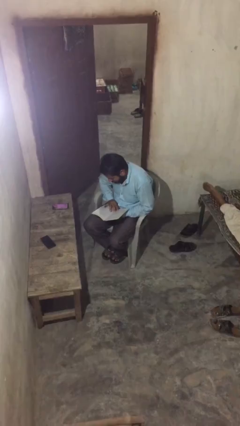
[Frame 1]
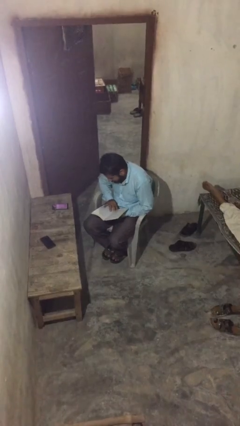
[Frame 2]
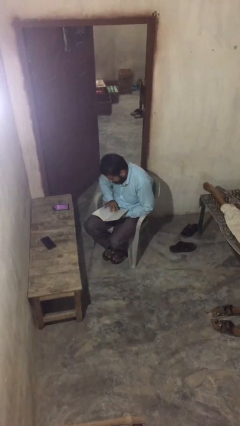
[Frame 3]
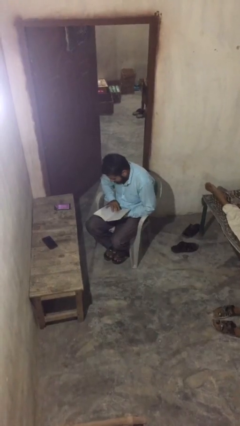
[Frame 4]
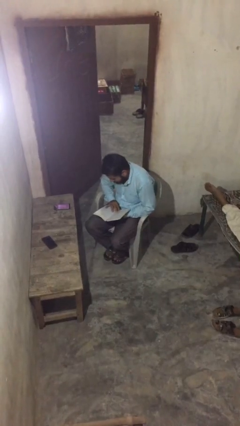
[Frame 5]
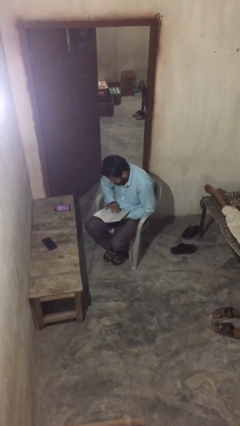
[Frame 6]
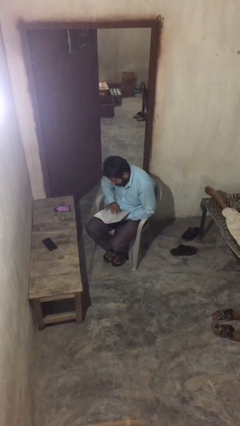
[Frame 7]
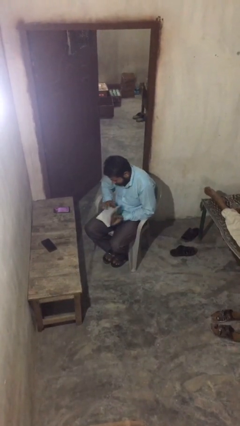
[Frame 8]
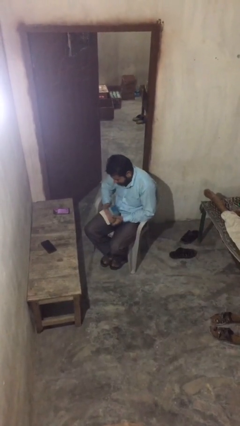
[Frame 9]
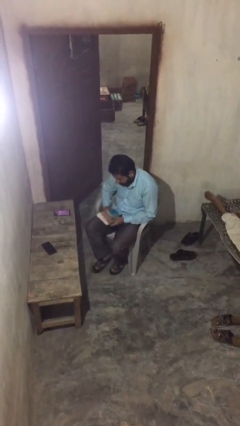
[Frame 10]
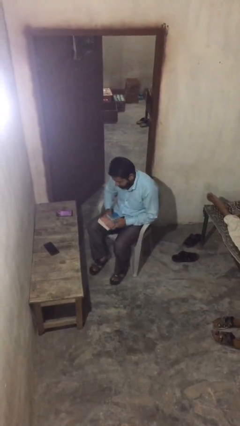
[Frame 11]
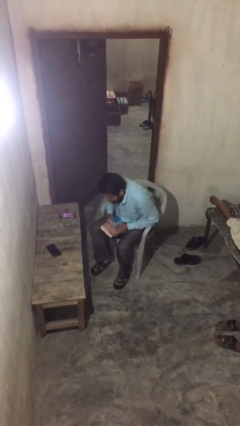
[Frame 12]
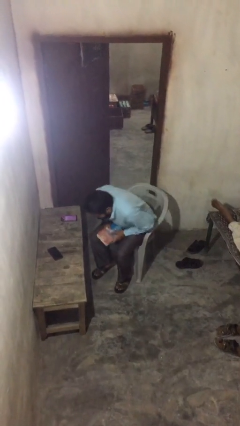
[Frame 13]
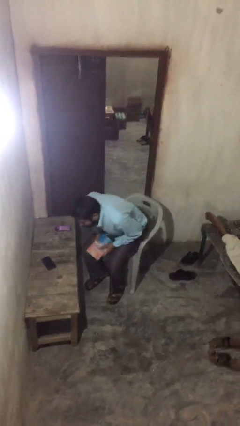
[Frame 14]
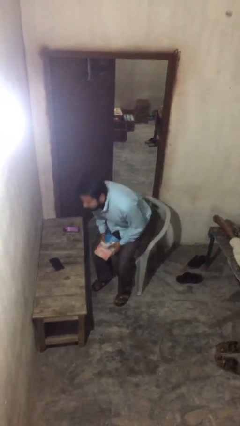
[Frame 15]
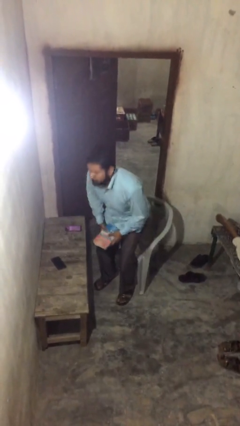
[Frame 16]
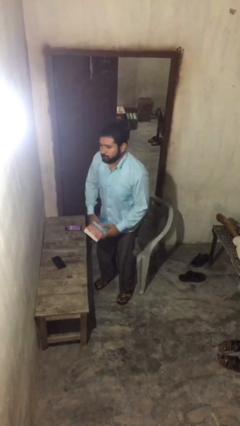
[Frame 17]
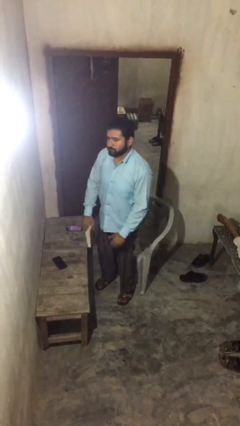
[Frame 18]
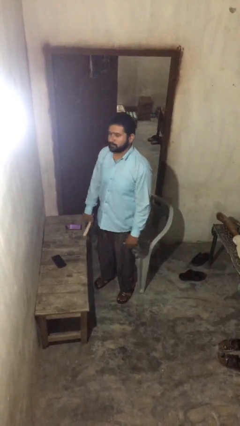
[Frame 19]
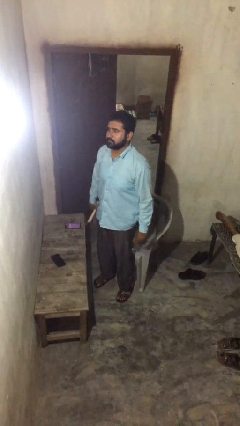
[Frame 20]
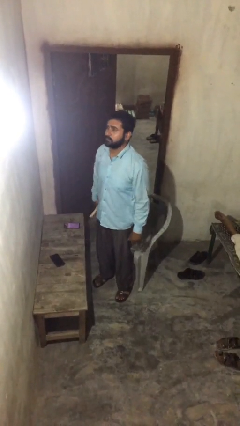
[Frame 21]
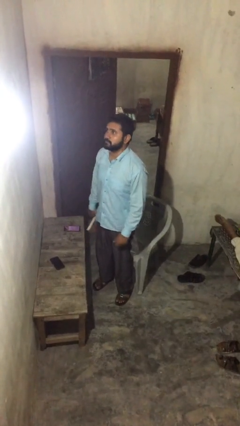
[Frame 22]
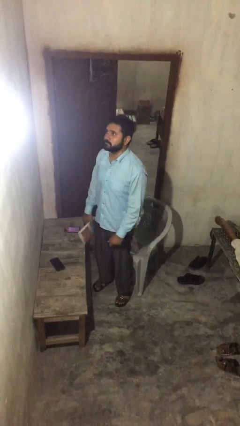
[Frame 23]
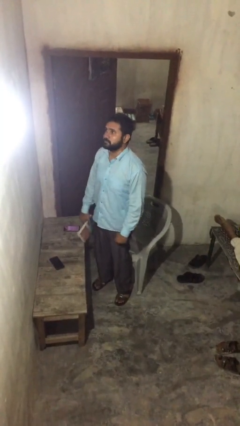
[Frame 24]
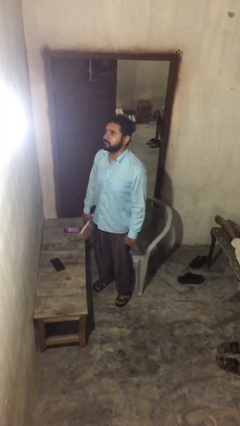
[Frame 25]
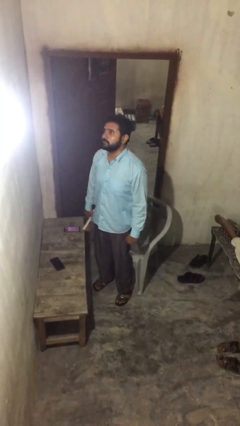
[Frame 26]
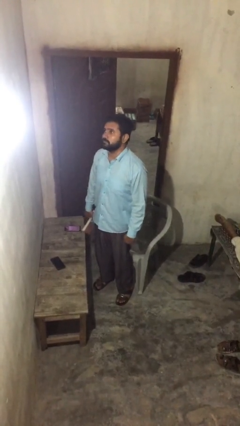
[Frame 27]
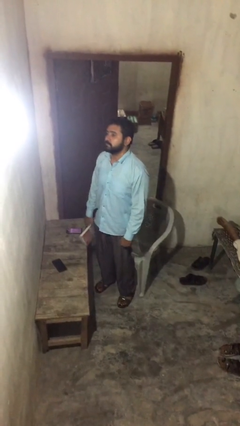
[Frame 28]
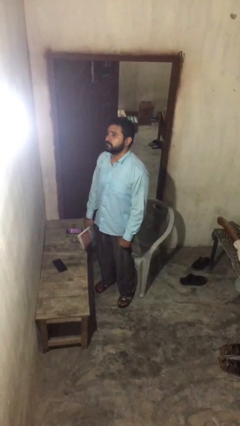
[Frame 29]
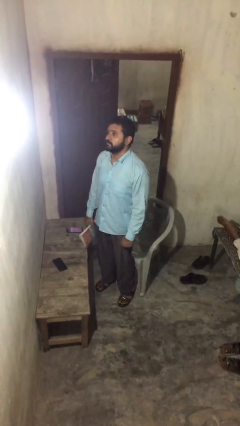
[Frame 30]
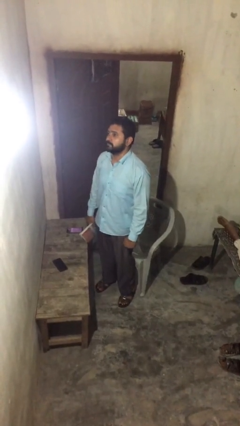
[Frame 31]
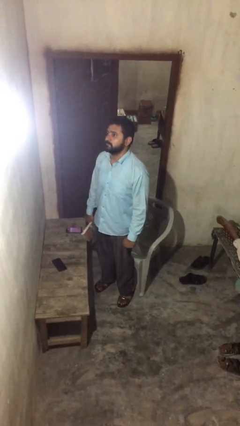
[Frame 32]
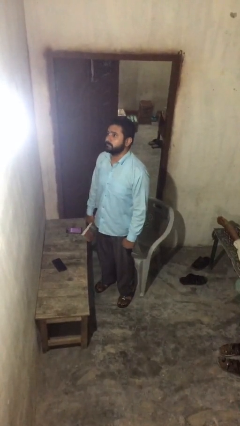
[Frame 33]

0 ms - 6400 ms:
person stands up

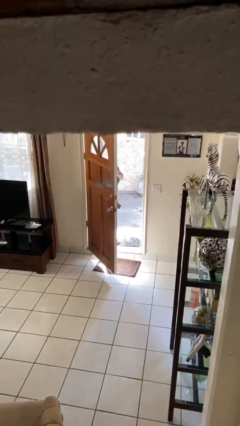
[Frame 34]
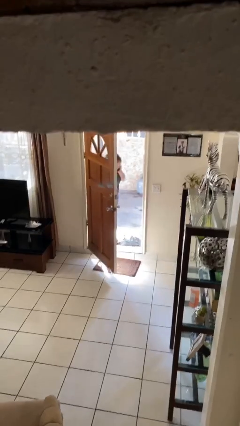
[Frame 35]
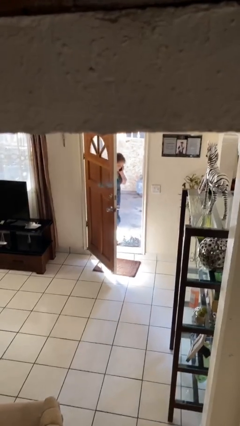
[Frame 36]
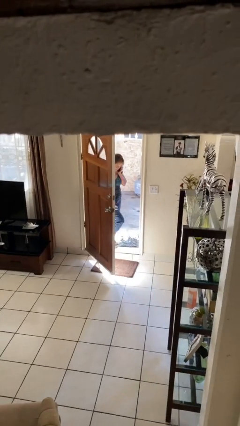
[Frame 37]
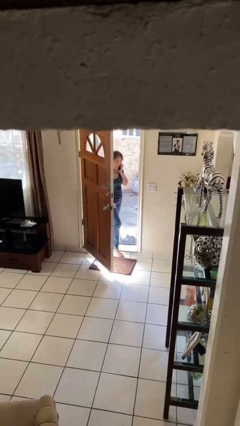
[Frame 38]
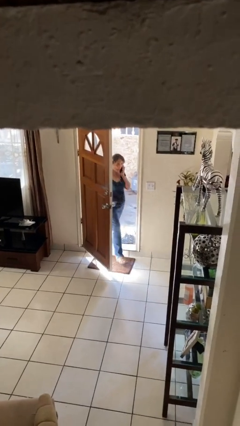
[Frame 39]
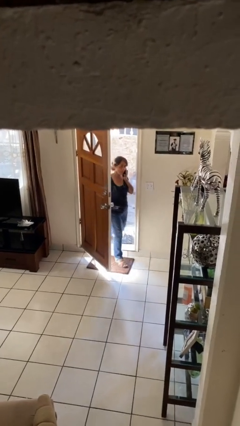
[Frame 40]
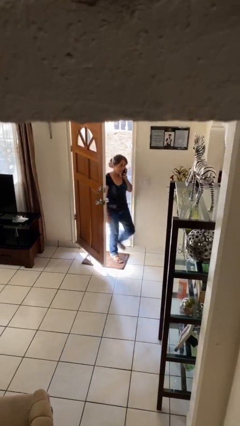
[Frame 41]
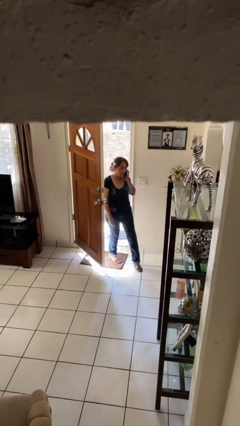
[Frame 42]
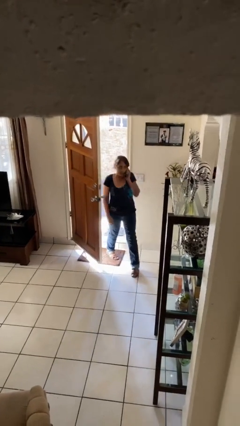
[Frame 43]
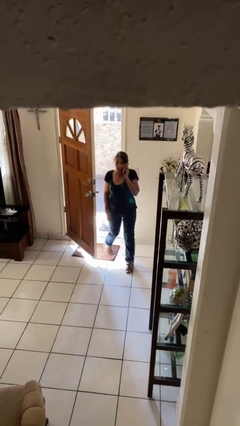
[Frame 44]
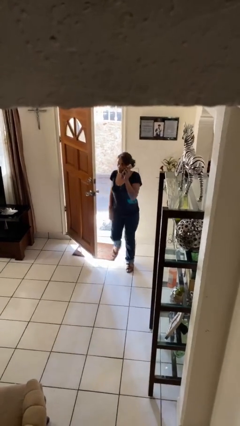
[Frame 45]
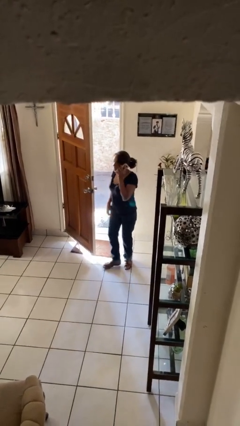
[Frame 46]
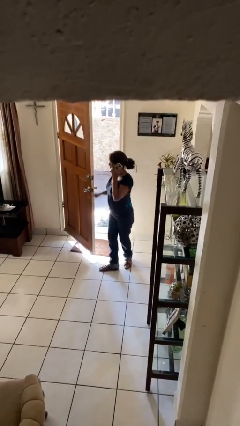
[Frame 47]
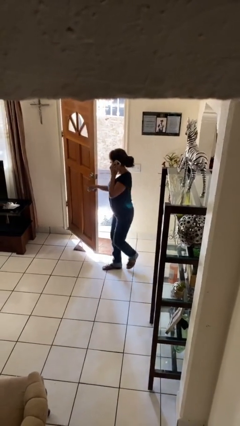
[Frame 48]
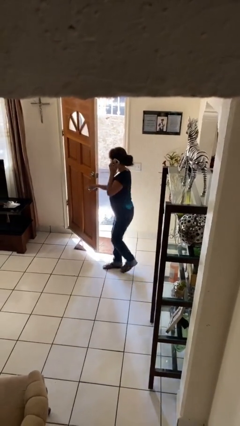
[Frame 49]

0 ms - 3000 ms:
person enters scene through structure

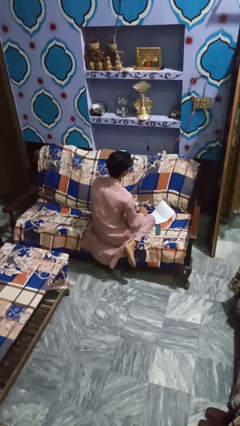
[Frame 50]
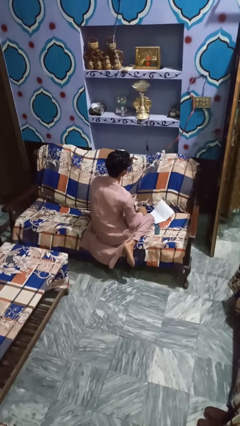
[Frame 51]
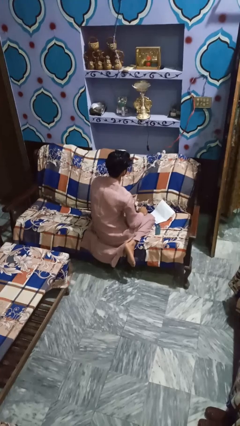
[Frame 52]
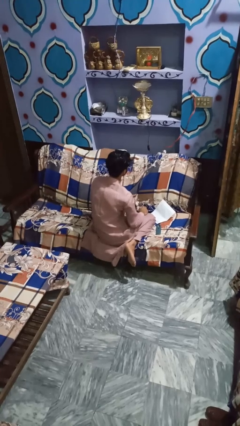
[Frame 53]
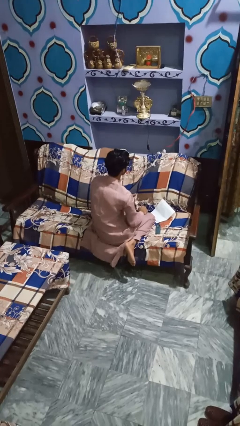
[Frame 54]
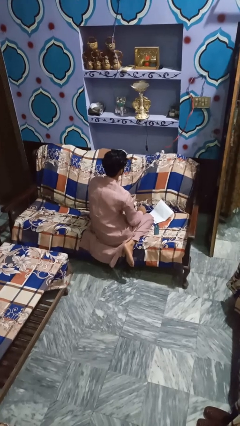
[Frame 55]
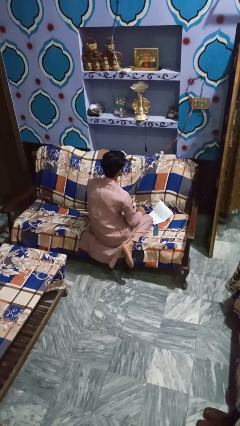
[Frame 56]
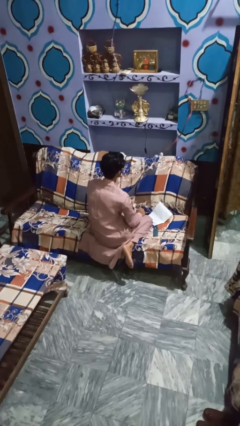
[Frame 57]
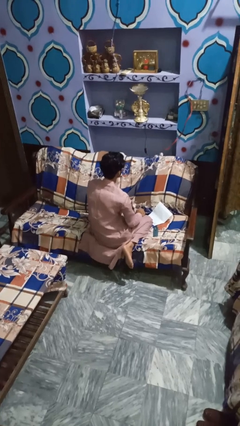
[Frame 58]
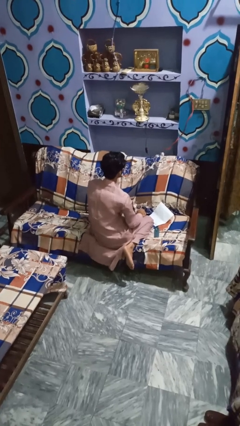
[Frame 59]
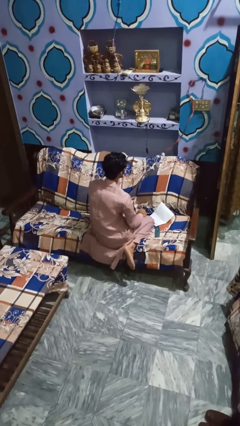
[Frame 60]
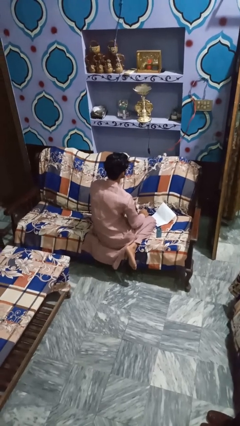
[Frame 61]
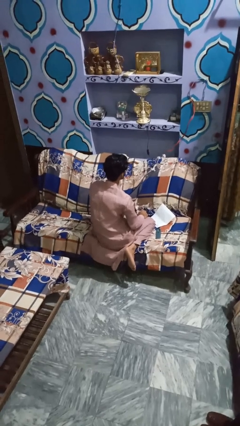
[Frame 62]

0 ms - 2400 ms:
person turns off lamp

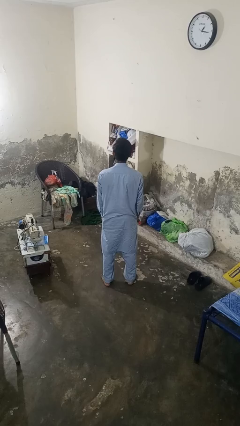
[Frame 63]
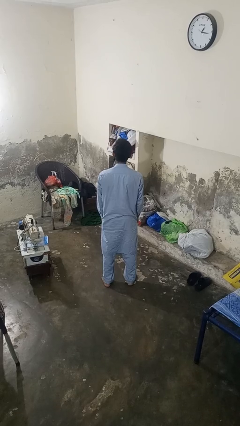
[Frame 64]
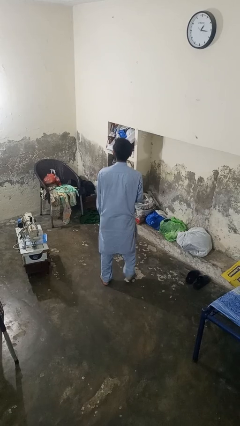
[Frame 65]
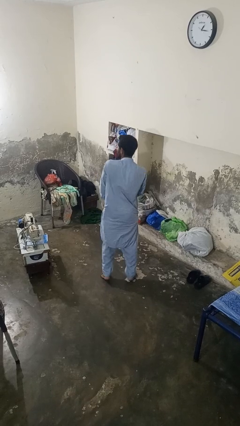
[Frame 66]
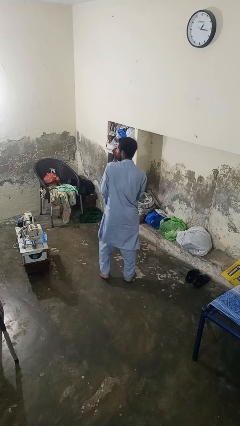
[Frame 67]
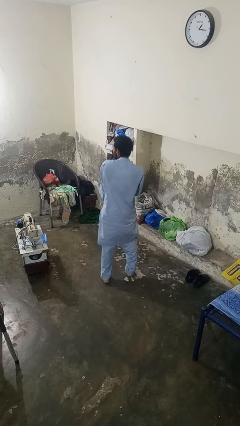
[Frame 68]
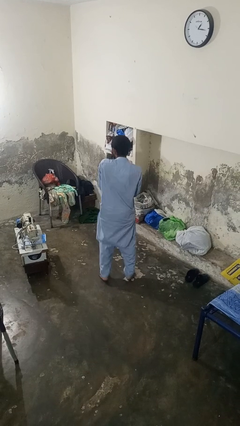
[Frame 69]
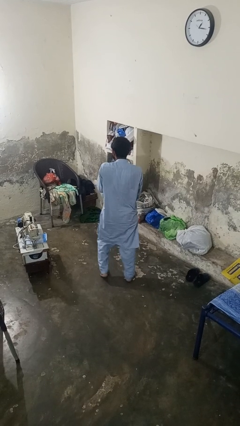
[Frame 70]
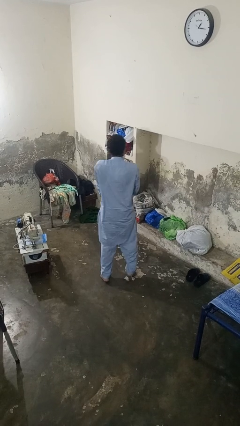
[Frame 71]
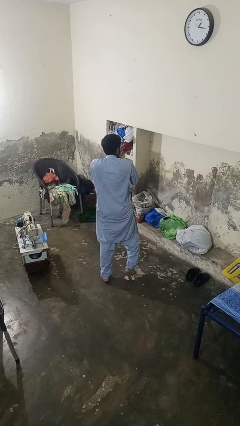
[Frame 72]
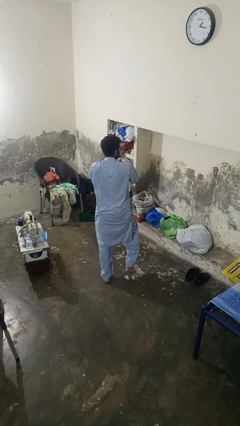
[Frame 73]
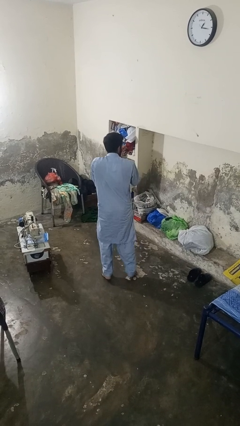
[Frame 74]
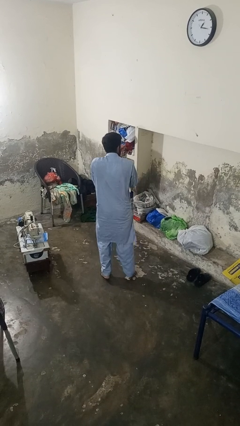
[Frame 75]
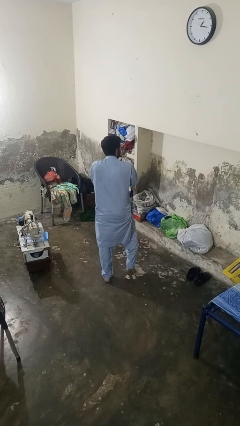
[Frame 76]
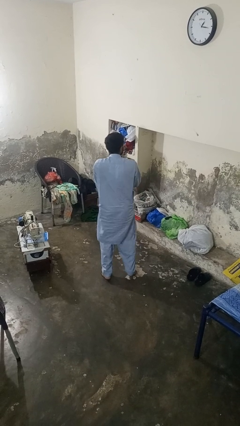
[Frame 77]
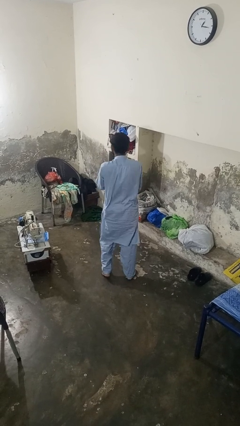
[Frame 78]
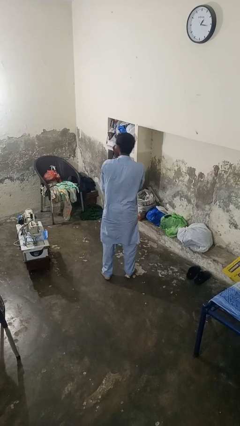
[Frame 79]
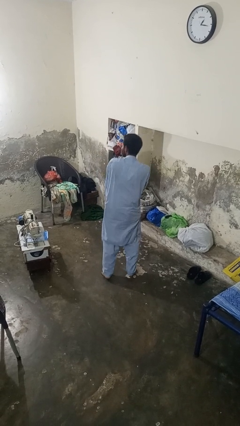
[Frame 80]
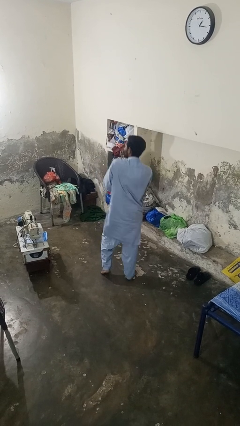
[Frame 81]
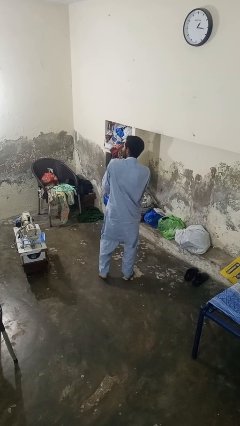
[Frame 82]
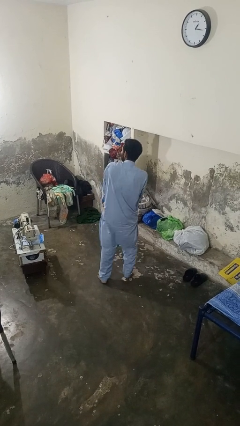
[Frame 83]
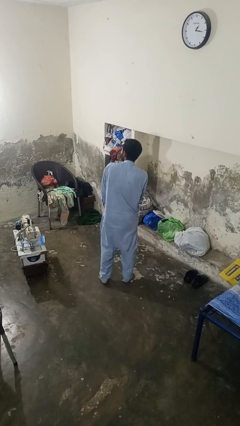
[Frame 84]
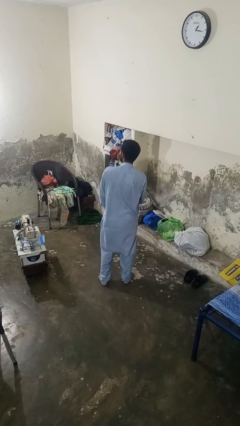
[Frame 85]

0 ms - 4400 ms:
person dances in place

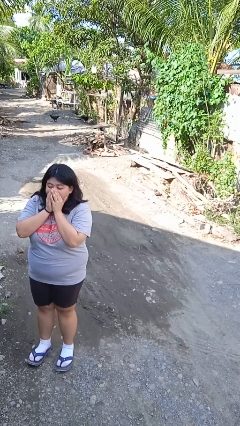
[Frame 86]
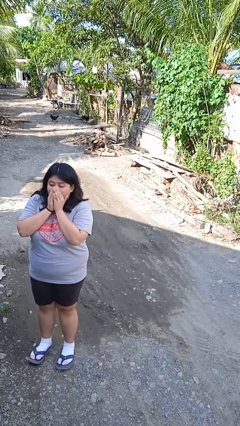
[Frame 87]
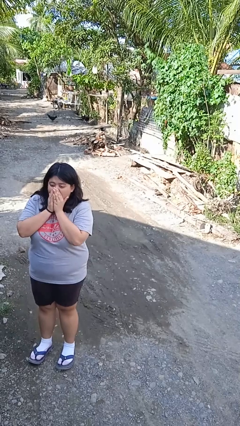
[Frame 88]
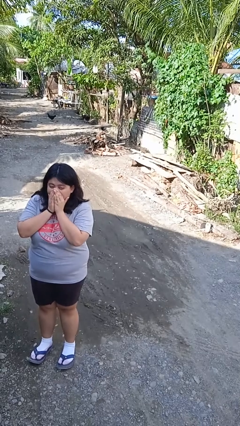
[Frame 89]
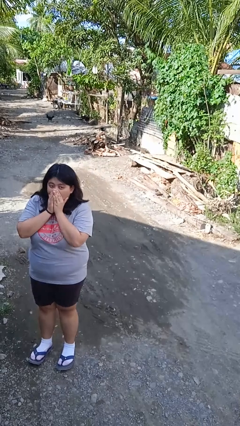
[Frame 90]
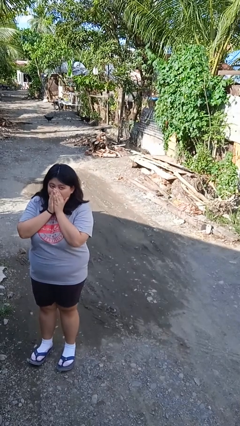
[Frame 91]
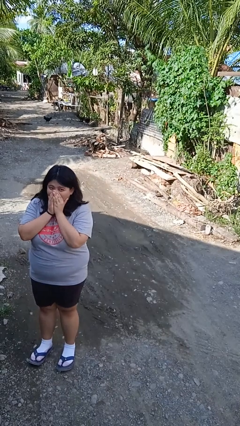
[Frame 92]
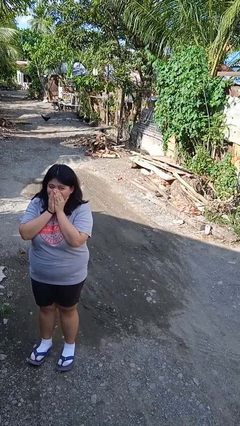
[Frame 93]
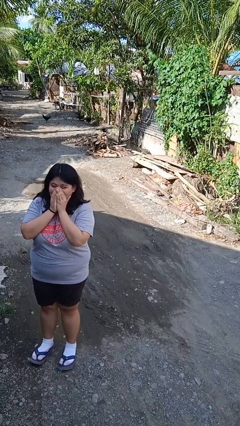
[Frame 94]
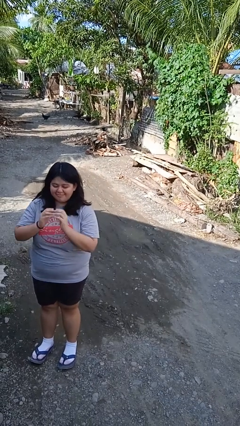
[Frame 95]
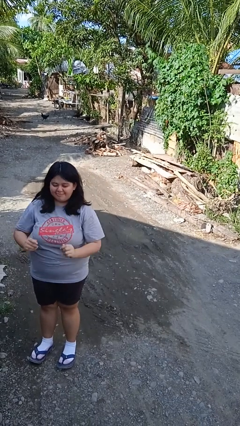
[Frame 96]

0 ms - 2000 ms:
person blows into hands
